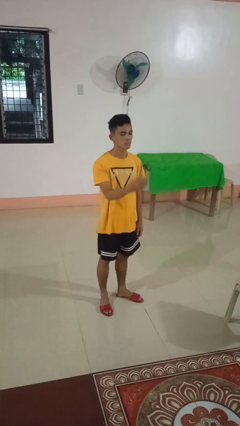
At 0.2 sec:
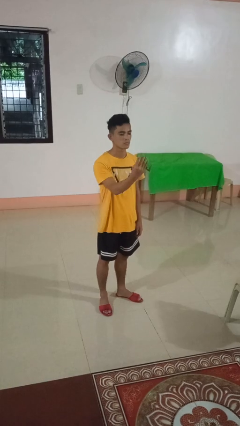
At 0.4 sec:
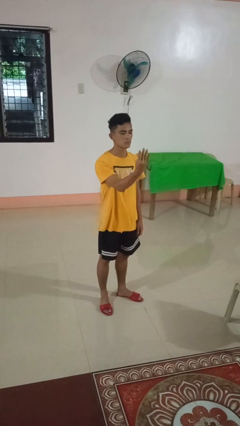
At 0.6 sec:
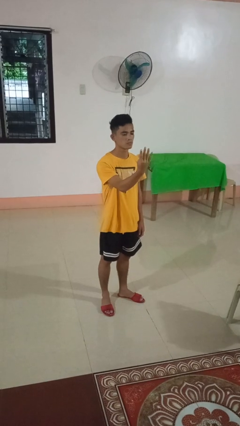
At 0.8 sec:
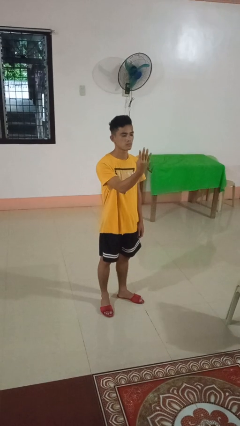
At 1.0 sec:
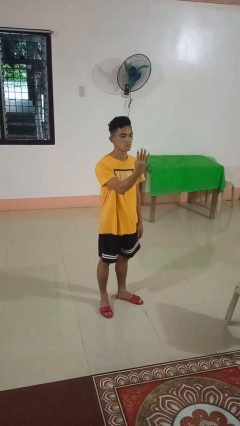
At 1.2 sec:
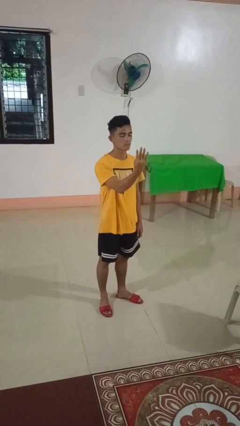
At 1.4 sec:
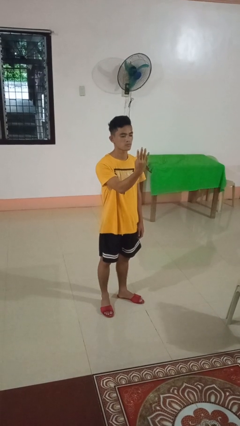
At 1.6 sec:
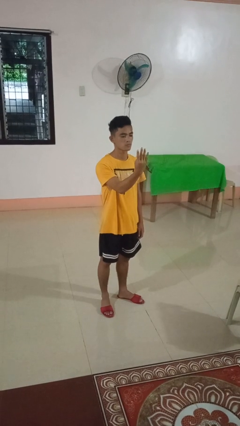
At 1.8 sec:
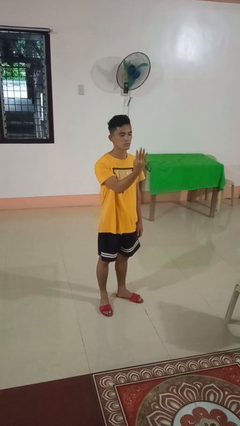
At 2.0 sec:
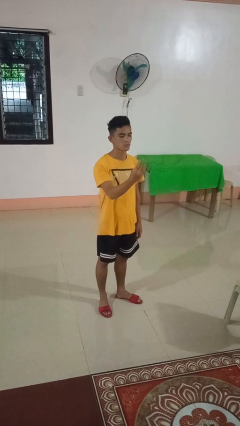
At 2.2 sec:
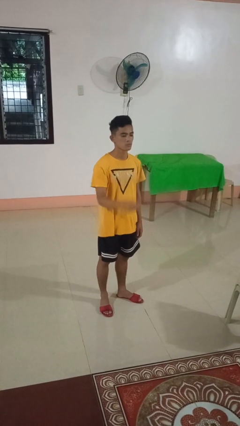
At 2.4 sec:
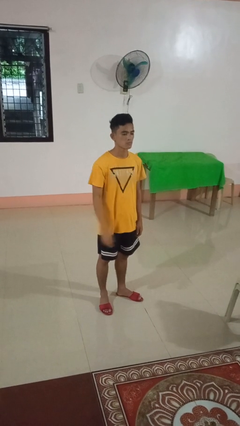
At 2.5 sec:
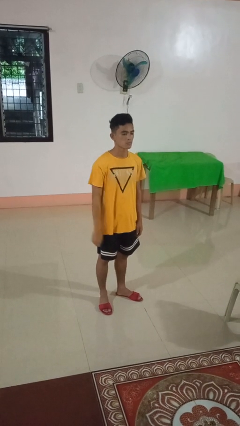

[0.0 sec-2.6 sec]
person gestures number four

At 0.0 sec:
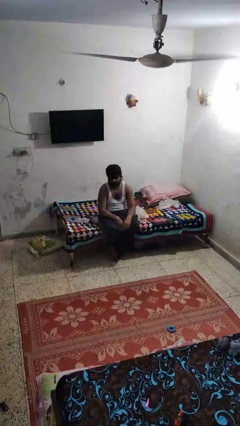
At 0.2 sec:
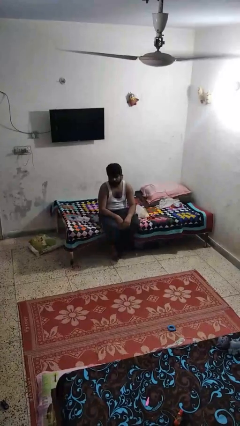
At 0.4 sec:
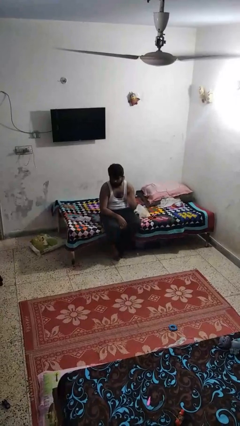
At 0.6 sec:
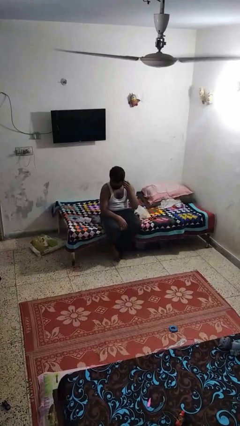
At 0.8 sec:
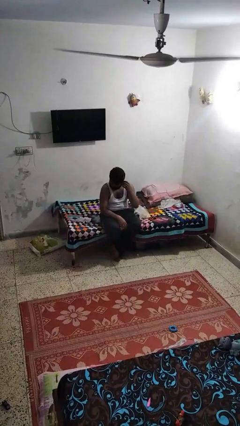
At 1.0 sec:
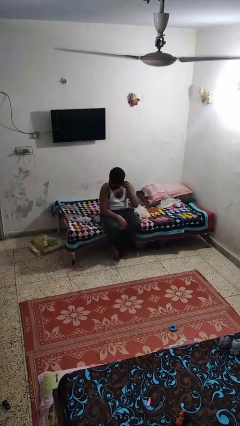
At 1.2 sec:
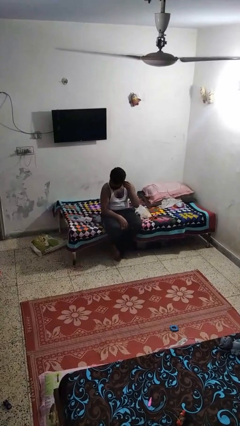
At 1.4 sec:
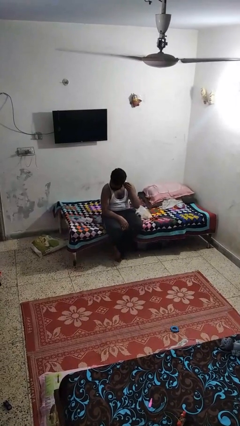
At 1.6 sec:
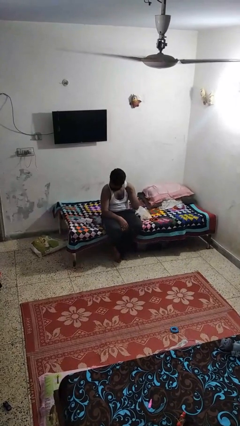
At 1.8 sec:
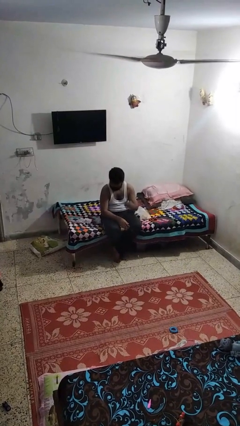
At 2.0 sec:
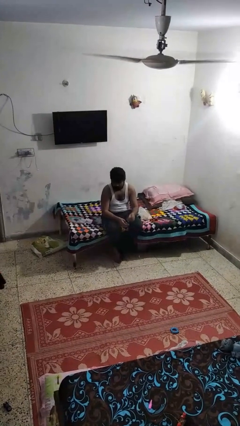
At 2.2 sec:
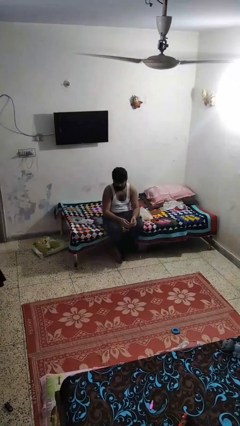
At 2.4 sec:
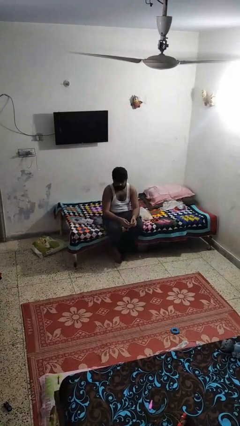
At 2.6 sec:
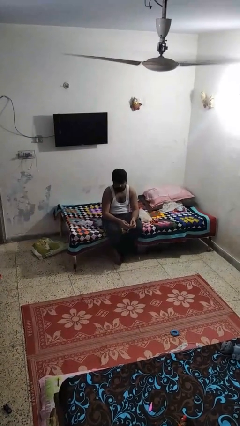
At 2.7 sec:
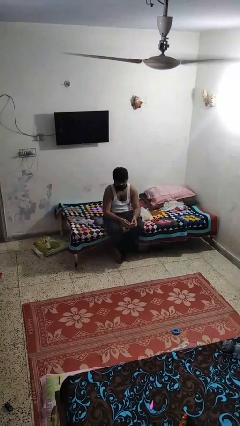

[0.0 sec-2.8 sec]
person takes off earrings

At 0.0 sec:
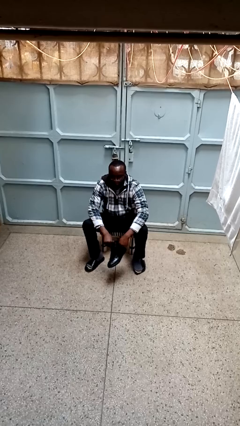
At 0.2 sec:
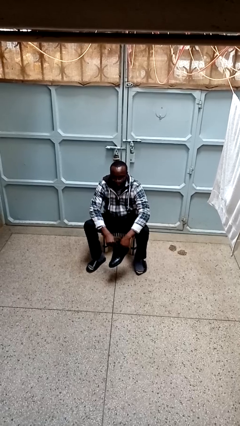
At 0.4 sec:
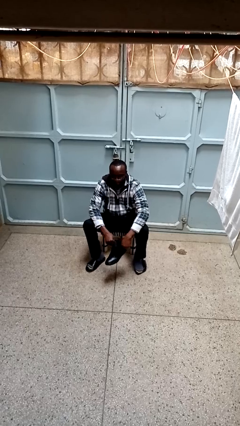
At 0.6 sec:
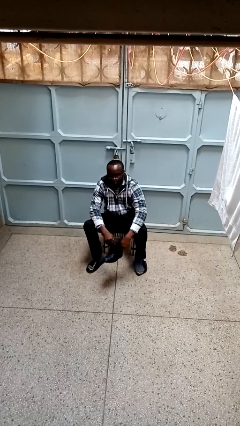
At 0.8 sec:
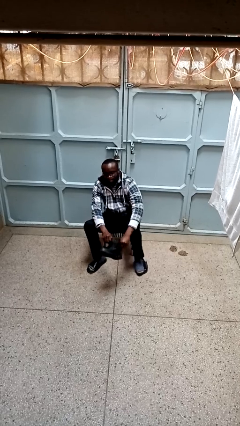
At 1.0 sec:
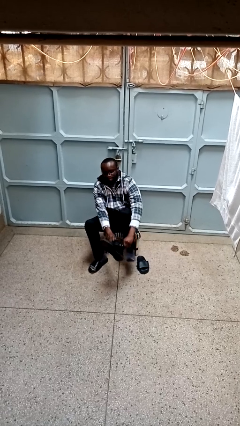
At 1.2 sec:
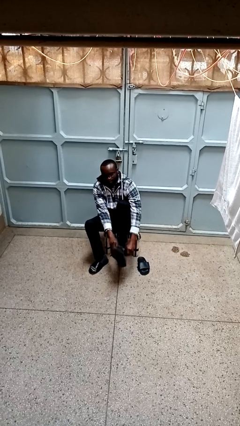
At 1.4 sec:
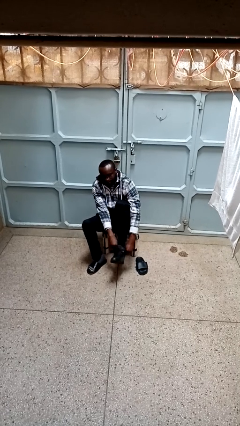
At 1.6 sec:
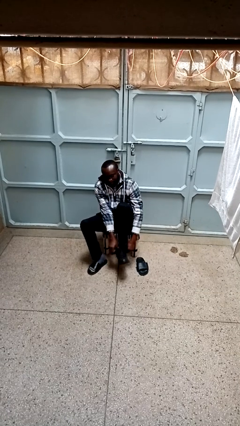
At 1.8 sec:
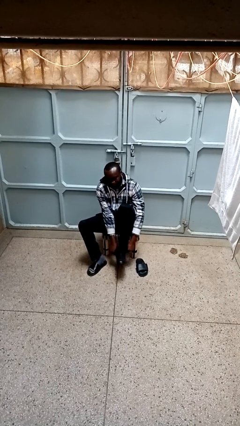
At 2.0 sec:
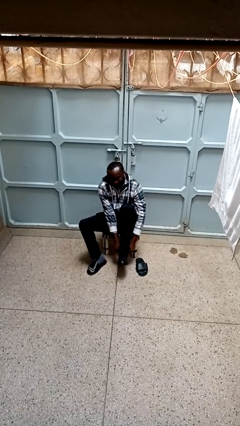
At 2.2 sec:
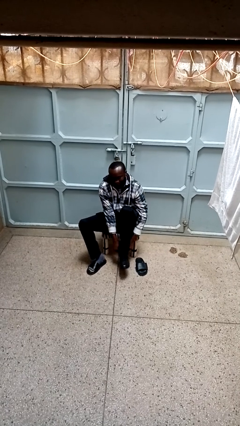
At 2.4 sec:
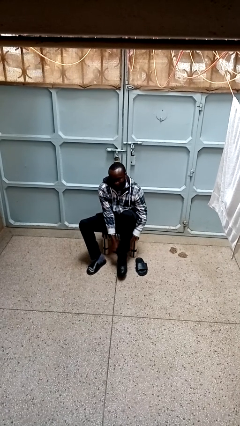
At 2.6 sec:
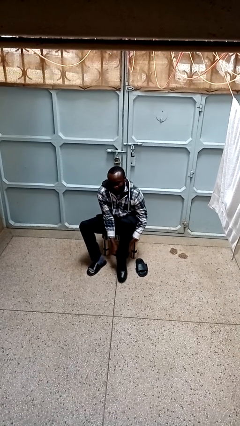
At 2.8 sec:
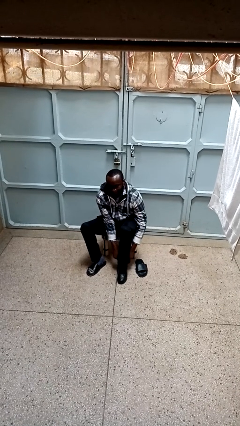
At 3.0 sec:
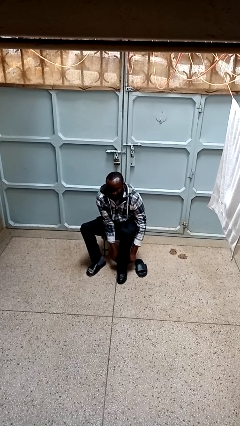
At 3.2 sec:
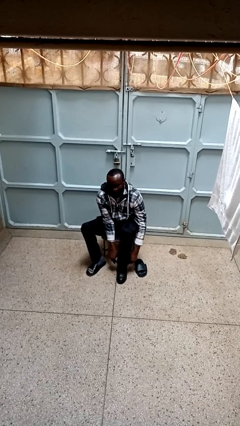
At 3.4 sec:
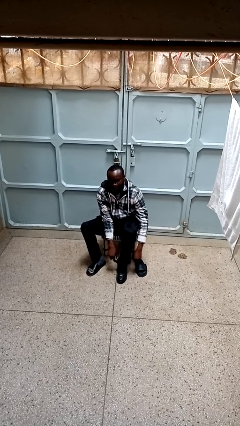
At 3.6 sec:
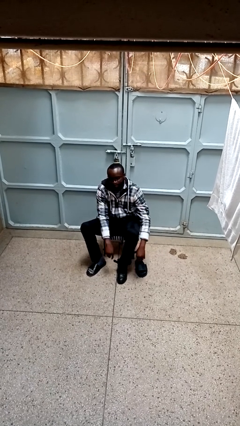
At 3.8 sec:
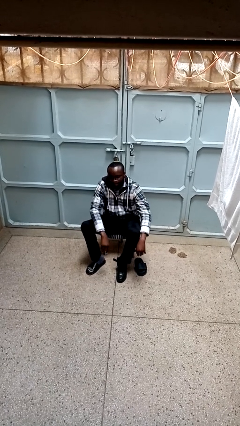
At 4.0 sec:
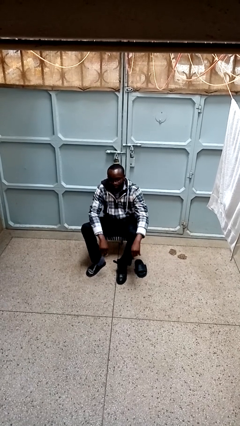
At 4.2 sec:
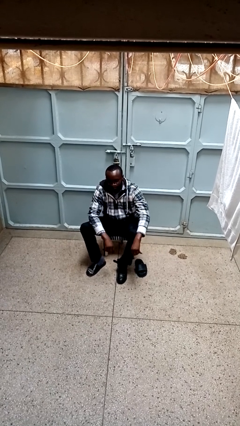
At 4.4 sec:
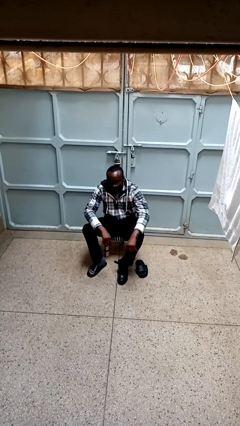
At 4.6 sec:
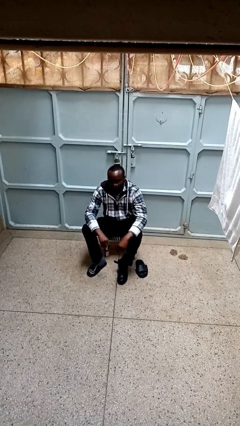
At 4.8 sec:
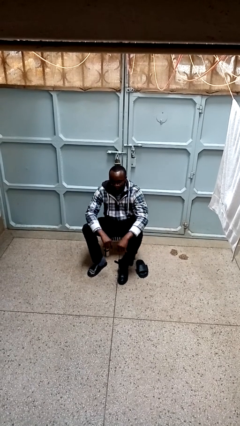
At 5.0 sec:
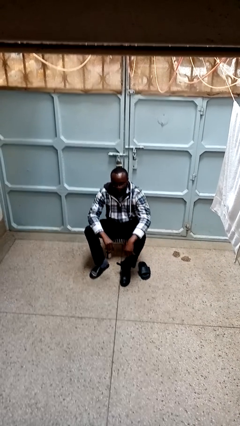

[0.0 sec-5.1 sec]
person puts on boots

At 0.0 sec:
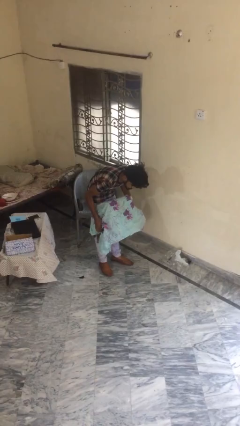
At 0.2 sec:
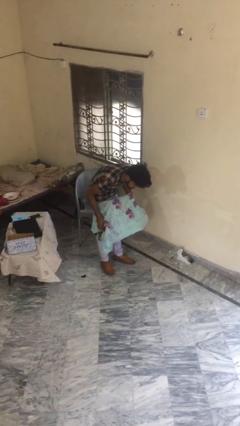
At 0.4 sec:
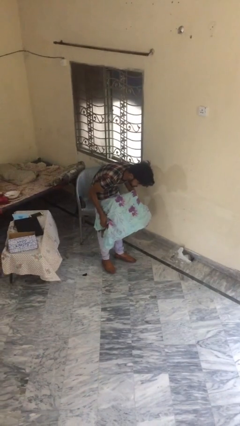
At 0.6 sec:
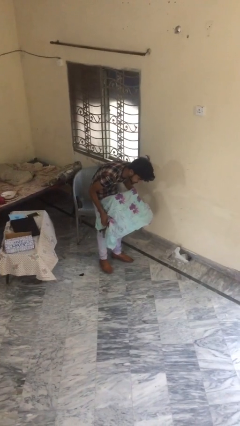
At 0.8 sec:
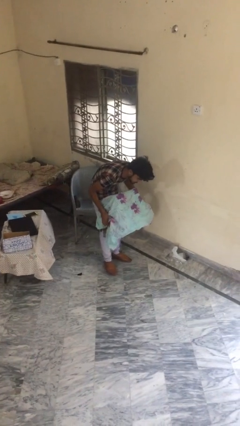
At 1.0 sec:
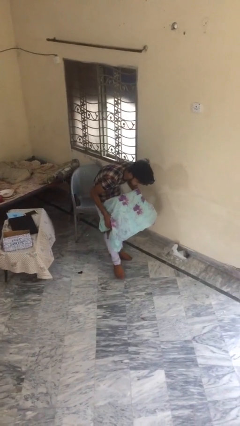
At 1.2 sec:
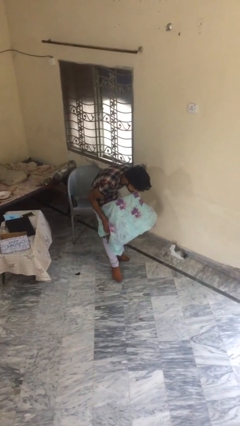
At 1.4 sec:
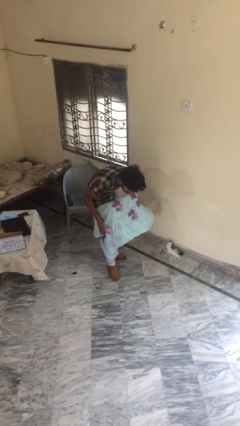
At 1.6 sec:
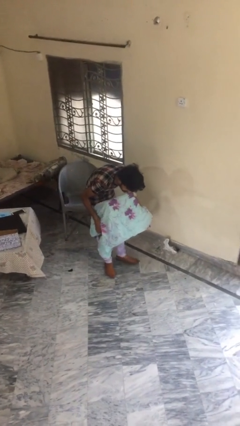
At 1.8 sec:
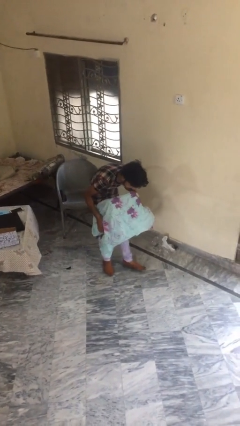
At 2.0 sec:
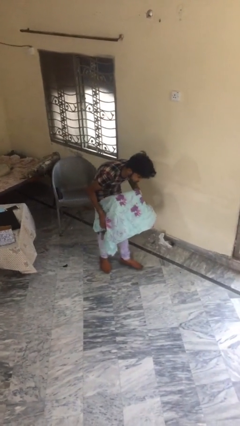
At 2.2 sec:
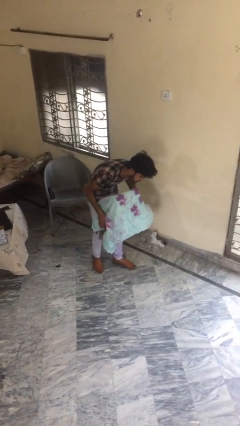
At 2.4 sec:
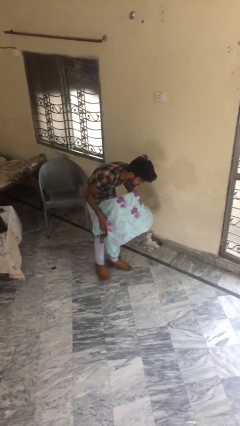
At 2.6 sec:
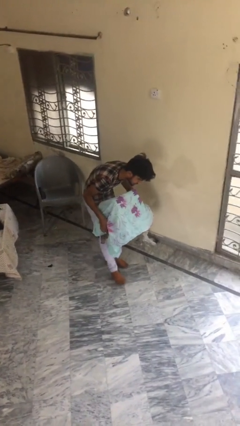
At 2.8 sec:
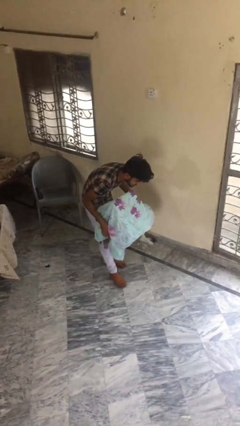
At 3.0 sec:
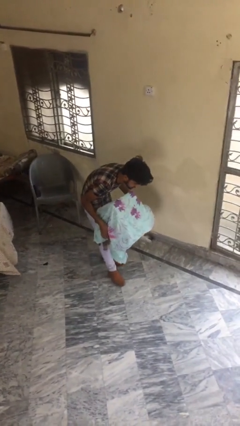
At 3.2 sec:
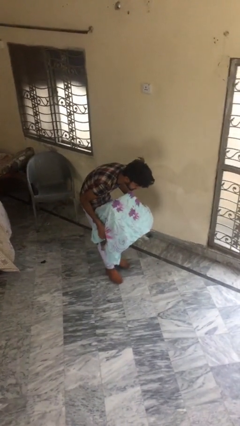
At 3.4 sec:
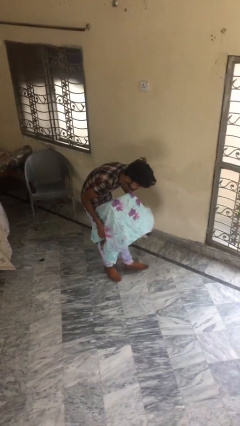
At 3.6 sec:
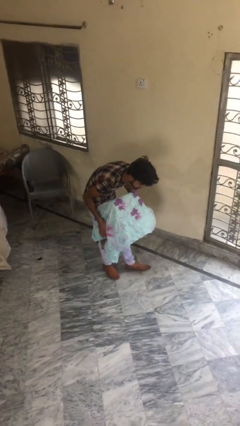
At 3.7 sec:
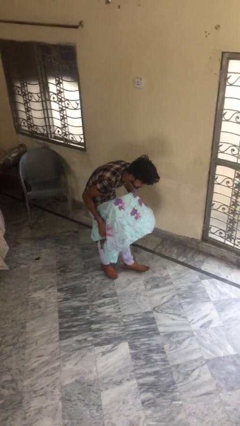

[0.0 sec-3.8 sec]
person carries heavy object

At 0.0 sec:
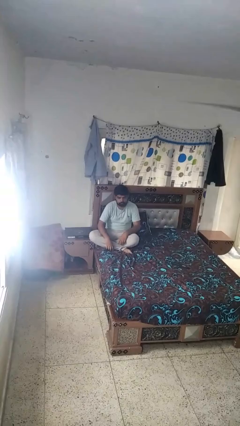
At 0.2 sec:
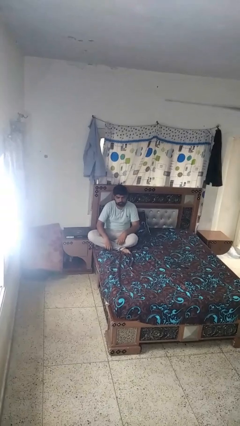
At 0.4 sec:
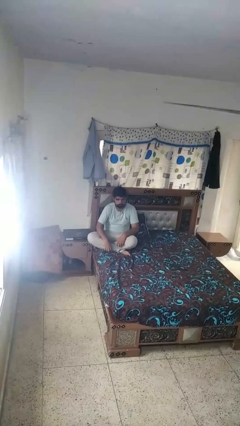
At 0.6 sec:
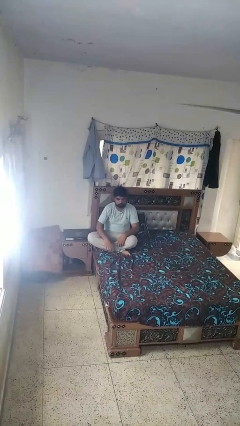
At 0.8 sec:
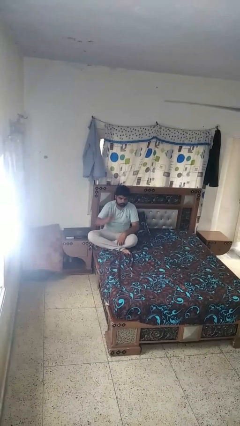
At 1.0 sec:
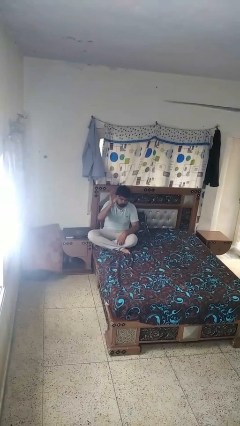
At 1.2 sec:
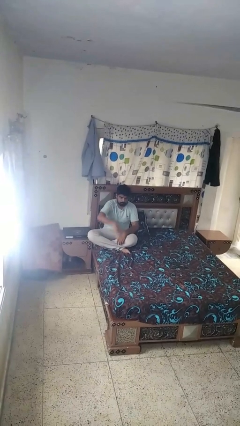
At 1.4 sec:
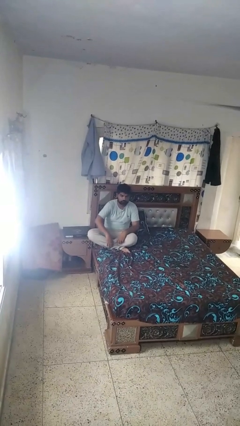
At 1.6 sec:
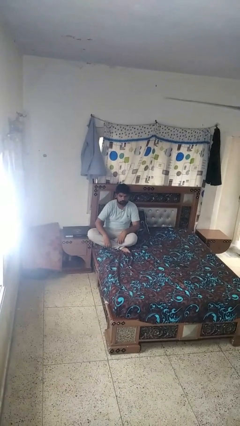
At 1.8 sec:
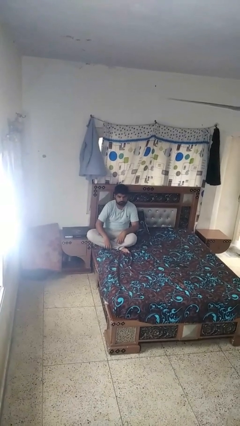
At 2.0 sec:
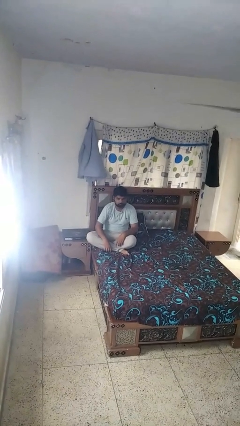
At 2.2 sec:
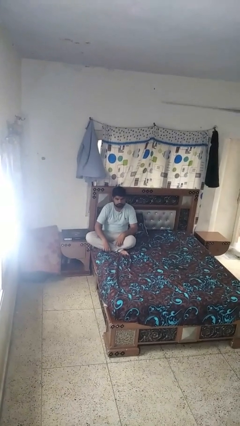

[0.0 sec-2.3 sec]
person gestures swipe down

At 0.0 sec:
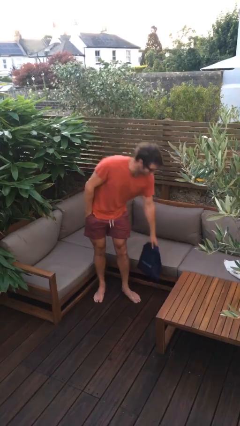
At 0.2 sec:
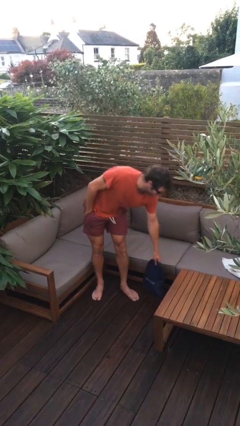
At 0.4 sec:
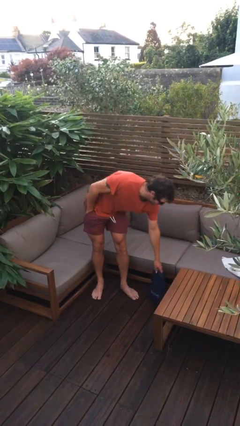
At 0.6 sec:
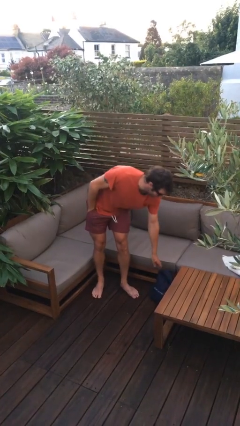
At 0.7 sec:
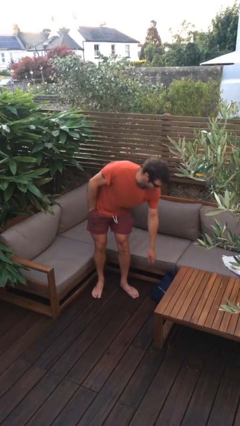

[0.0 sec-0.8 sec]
person puts down object on floor
